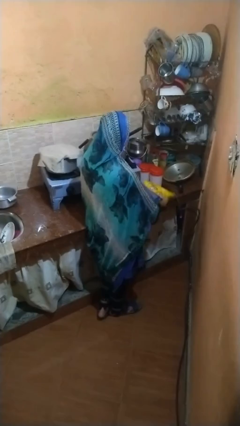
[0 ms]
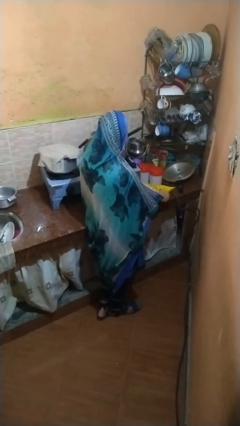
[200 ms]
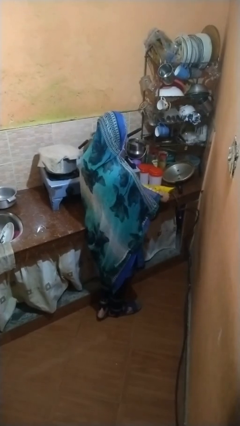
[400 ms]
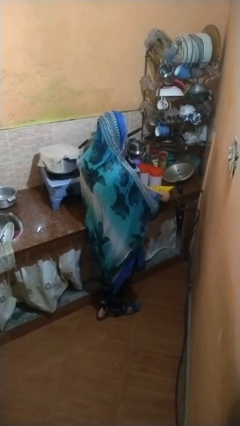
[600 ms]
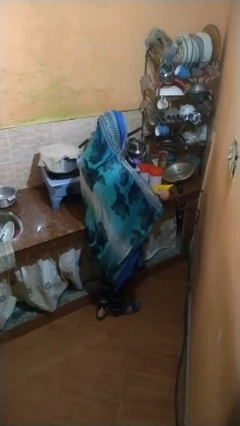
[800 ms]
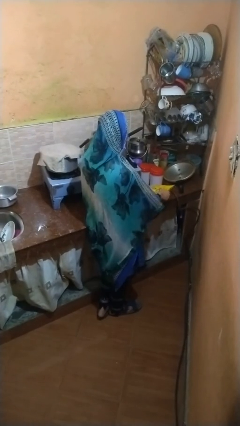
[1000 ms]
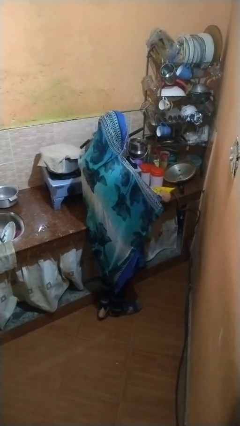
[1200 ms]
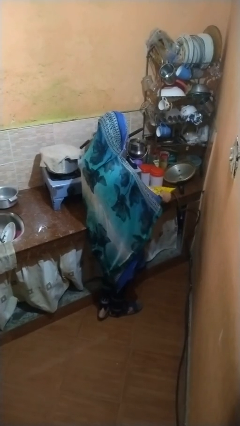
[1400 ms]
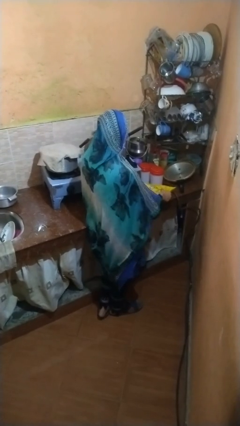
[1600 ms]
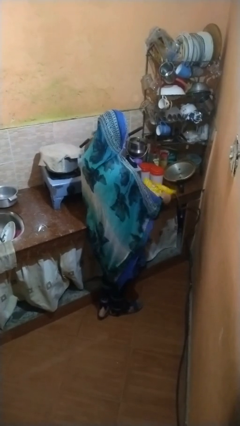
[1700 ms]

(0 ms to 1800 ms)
person pours into bowl

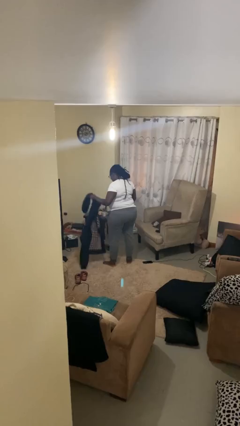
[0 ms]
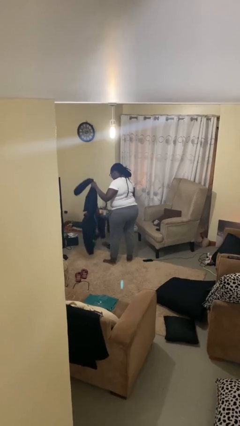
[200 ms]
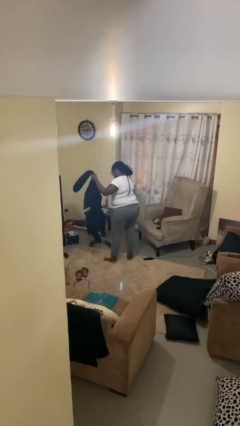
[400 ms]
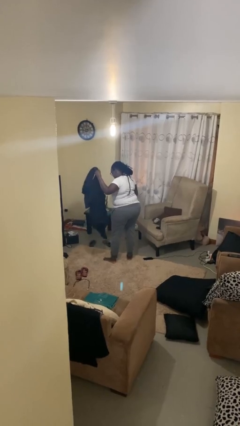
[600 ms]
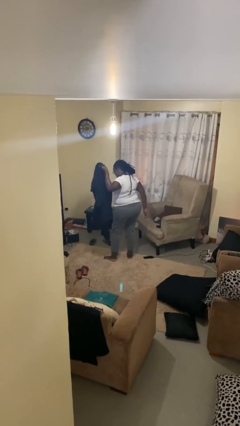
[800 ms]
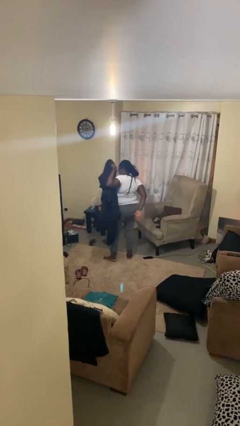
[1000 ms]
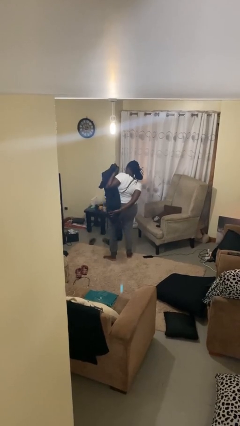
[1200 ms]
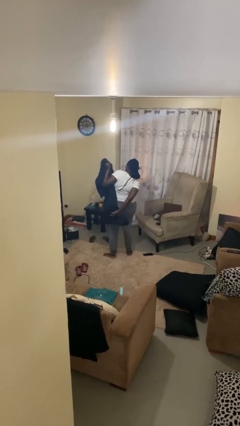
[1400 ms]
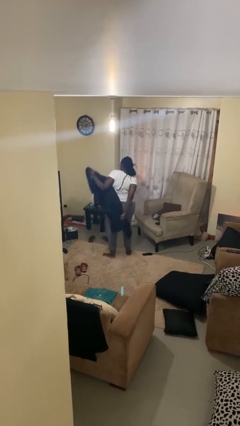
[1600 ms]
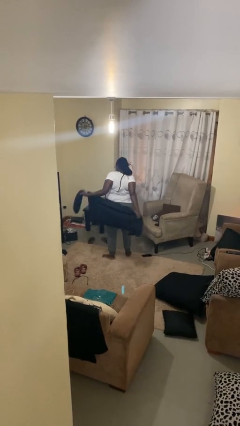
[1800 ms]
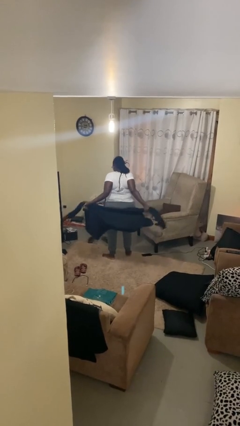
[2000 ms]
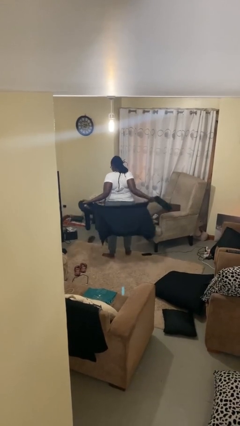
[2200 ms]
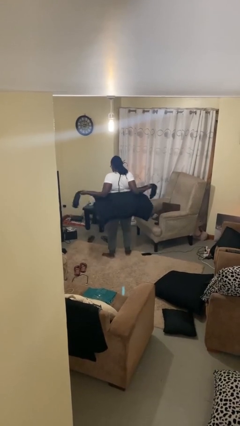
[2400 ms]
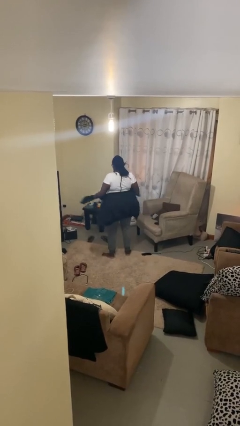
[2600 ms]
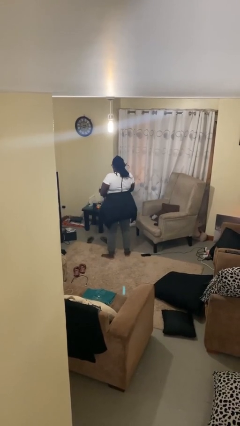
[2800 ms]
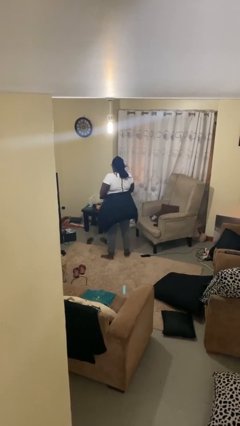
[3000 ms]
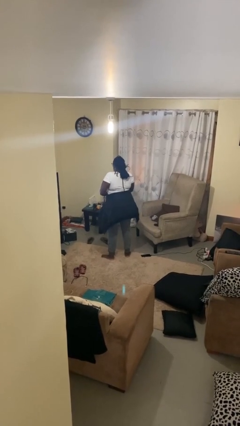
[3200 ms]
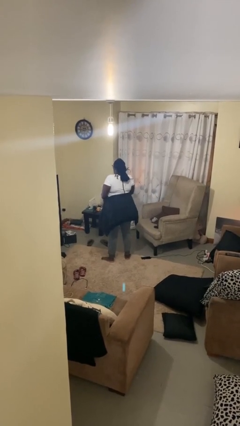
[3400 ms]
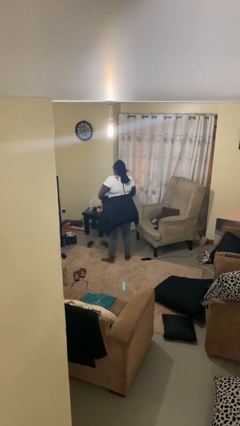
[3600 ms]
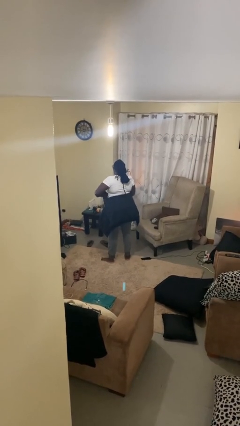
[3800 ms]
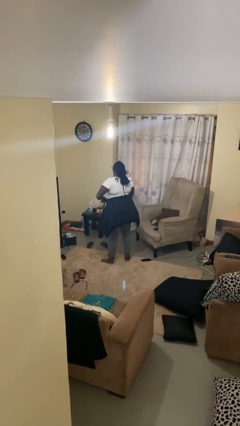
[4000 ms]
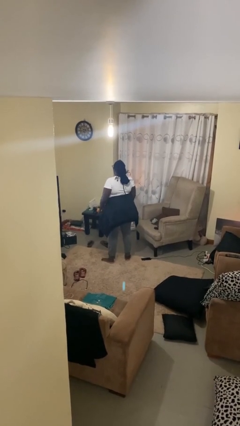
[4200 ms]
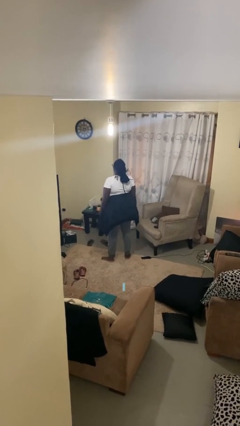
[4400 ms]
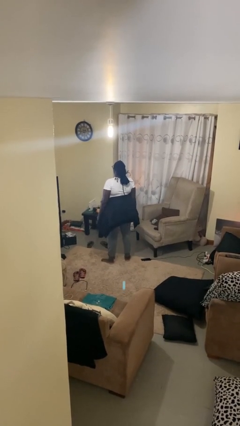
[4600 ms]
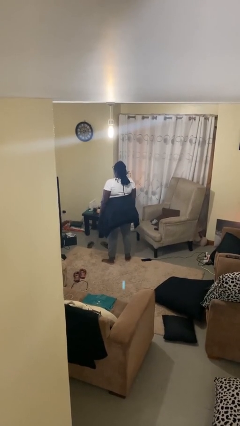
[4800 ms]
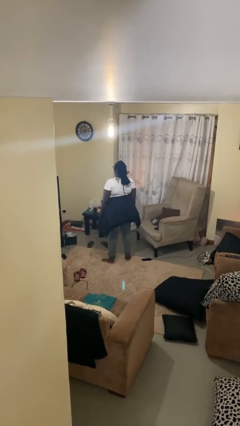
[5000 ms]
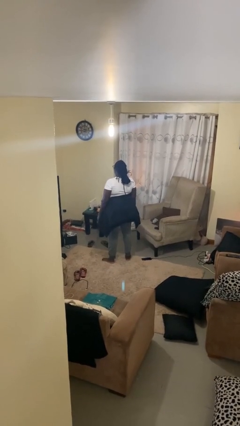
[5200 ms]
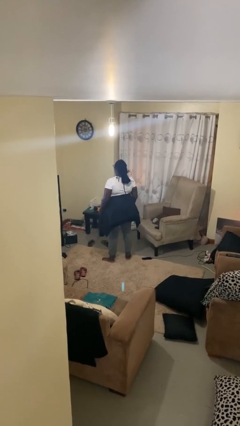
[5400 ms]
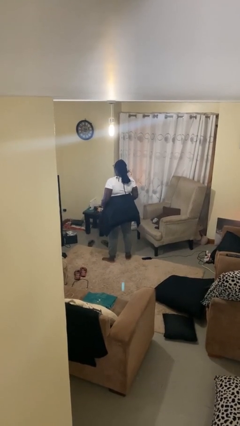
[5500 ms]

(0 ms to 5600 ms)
person ties jacket around waist

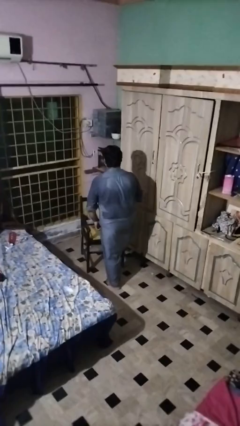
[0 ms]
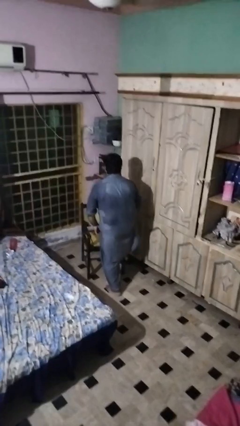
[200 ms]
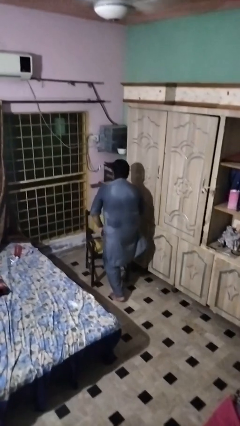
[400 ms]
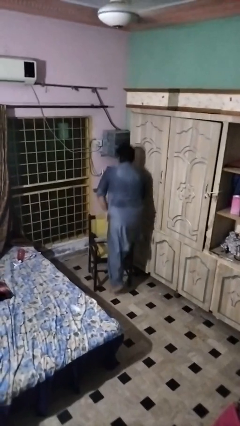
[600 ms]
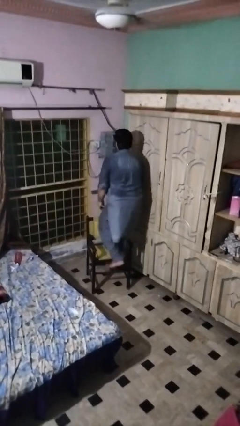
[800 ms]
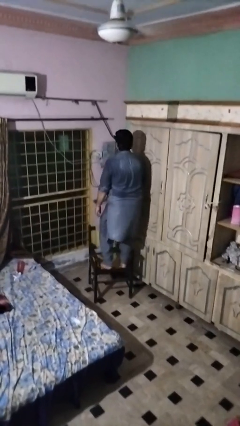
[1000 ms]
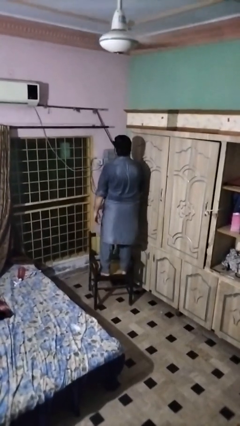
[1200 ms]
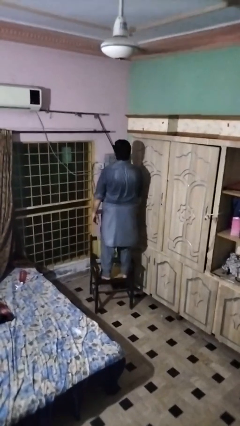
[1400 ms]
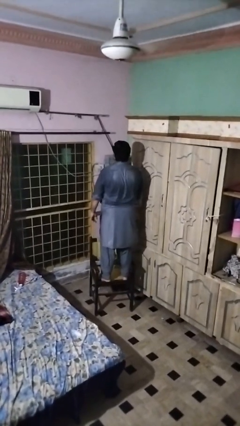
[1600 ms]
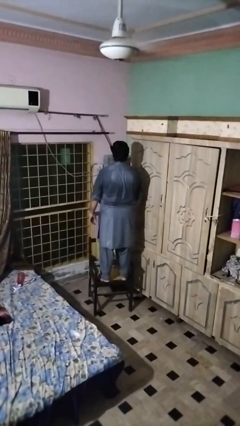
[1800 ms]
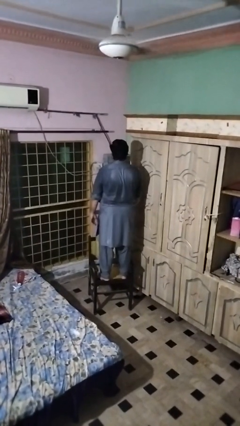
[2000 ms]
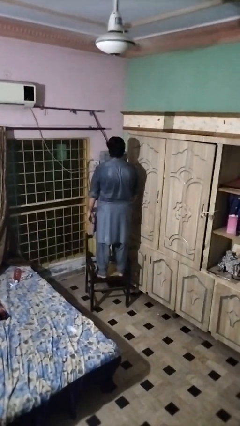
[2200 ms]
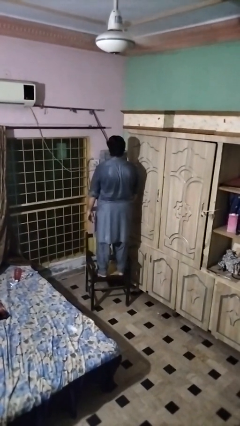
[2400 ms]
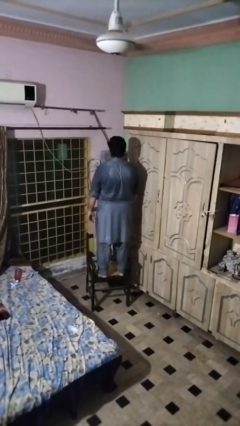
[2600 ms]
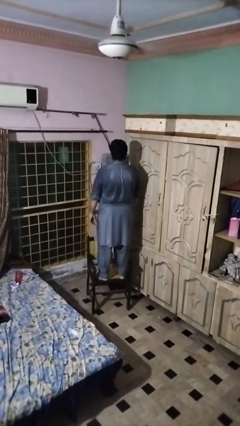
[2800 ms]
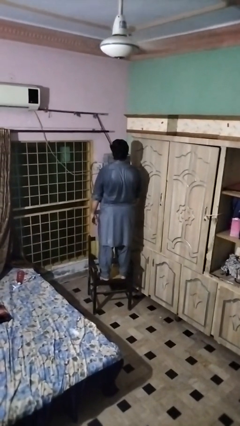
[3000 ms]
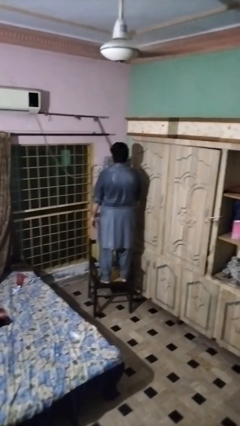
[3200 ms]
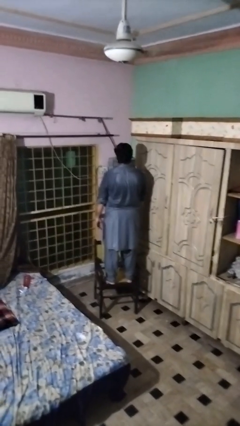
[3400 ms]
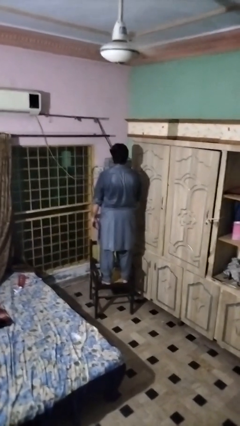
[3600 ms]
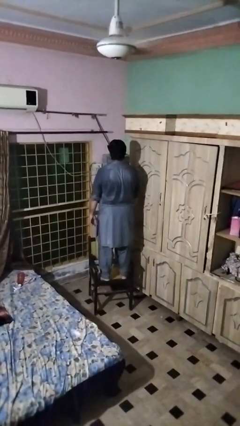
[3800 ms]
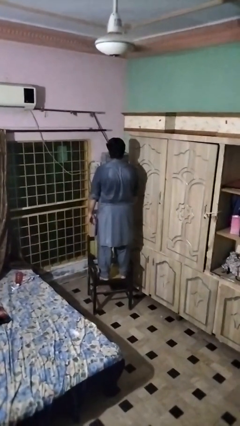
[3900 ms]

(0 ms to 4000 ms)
person climbs on chair

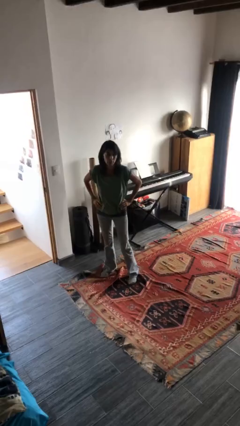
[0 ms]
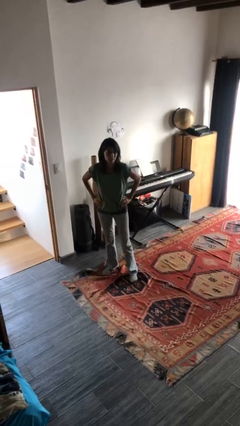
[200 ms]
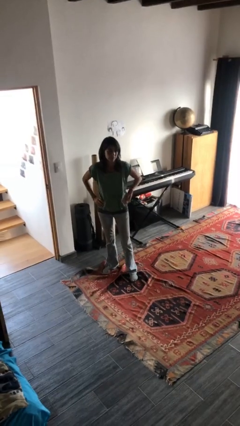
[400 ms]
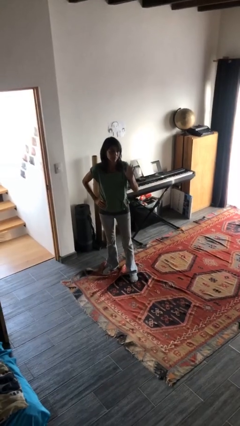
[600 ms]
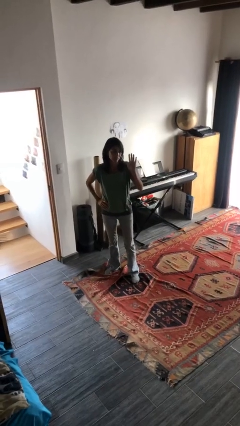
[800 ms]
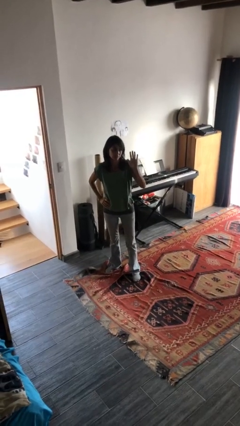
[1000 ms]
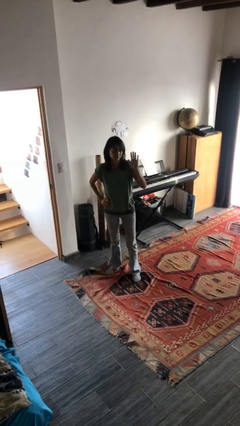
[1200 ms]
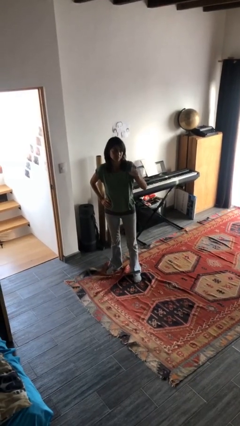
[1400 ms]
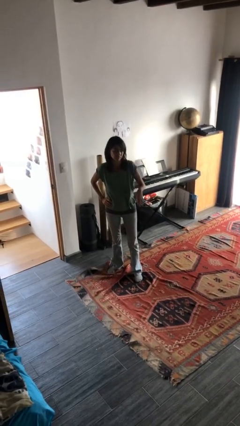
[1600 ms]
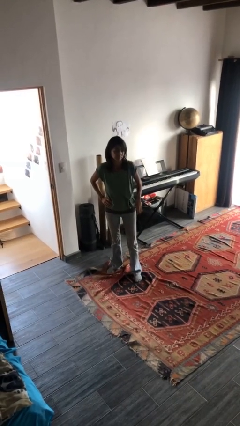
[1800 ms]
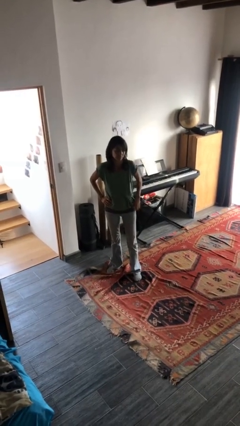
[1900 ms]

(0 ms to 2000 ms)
person waves at person

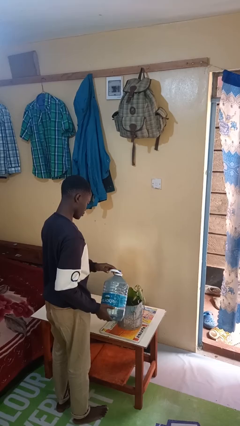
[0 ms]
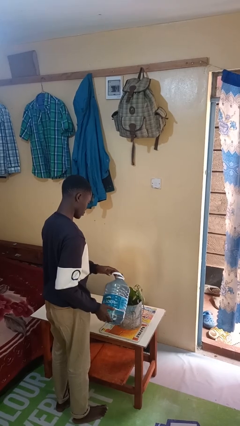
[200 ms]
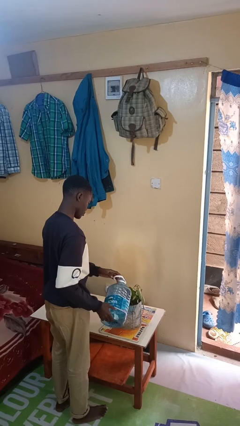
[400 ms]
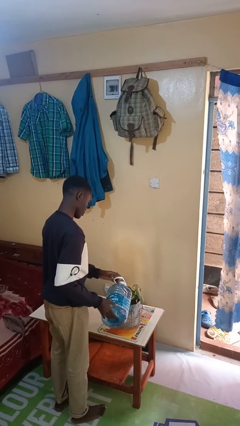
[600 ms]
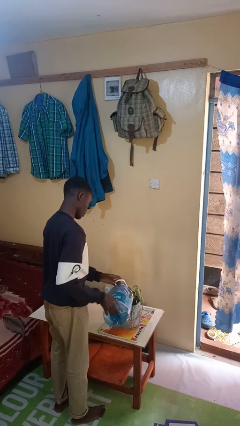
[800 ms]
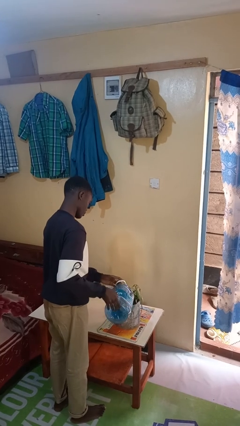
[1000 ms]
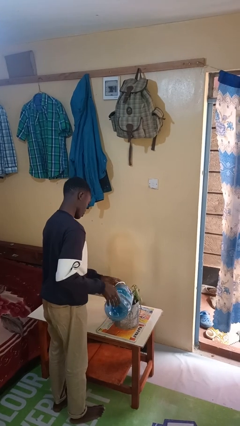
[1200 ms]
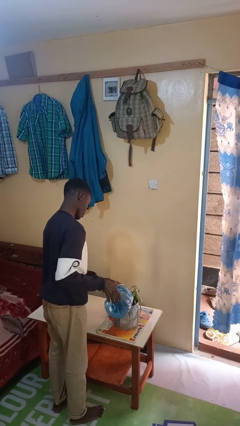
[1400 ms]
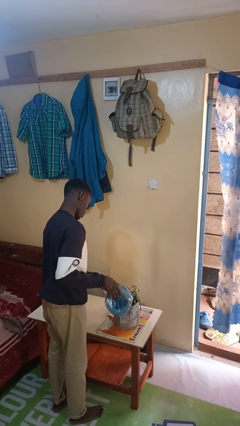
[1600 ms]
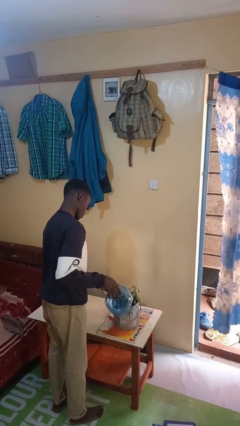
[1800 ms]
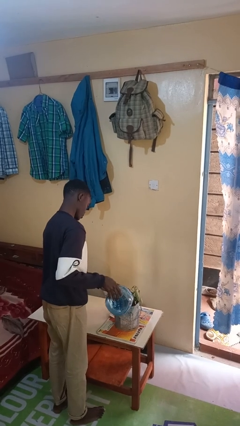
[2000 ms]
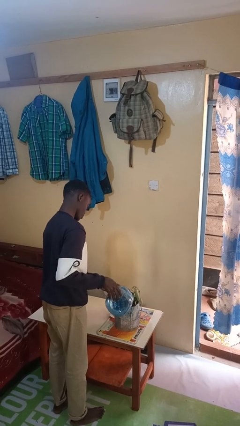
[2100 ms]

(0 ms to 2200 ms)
person waters houseplant

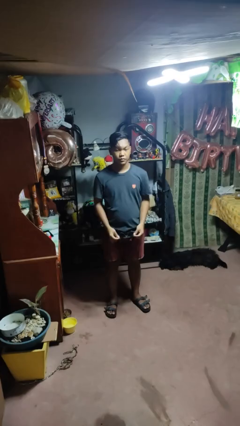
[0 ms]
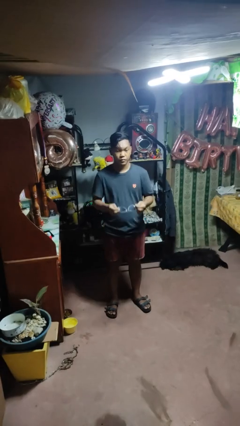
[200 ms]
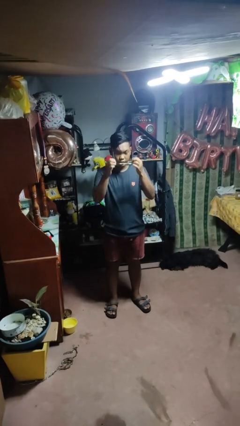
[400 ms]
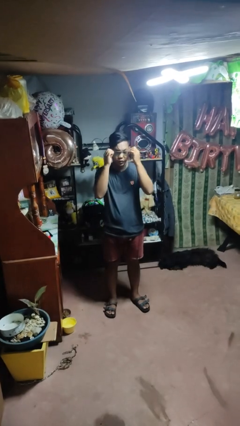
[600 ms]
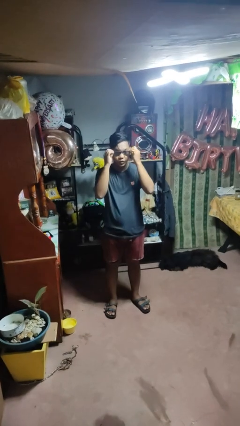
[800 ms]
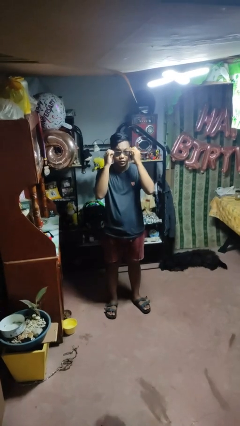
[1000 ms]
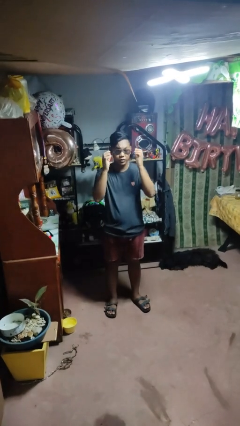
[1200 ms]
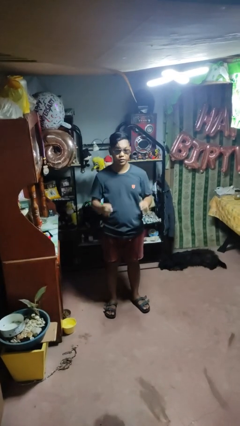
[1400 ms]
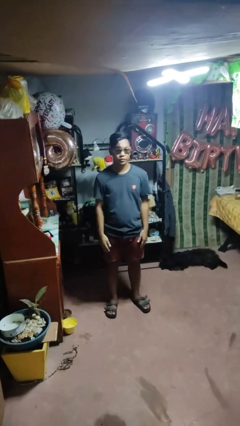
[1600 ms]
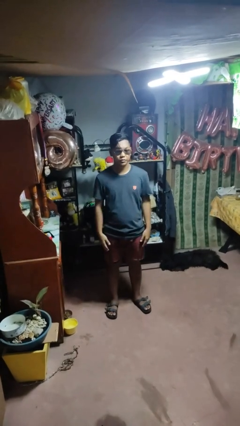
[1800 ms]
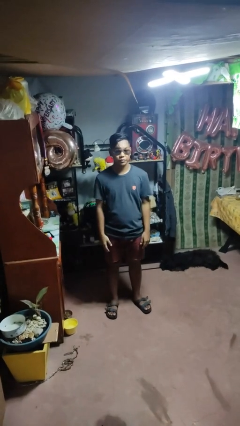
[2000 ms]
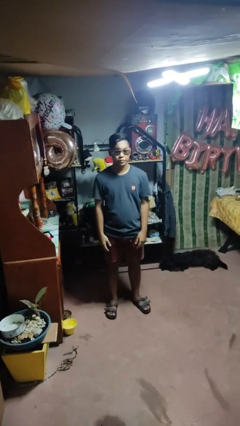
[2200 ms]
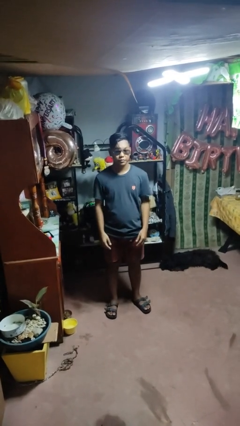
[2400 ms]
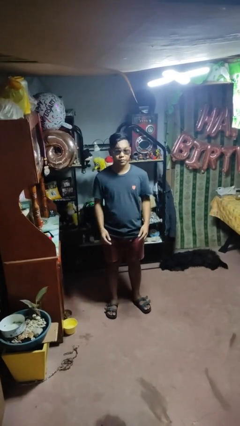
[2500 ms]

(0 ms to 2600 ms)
person puts on sunglasses
